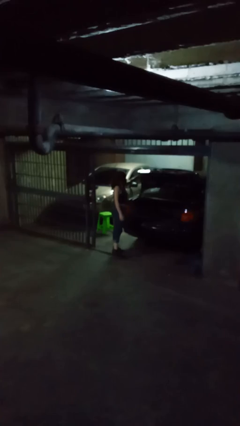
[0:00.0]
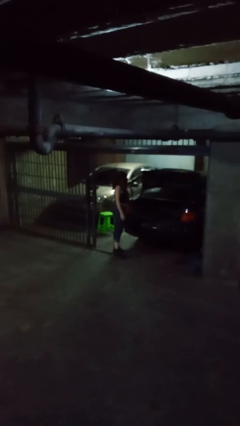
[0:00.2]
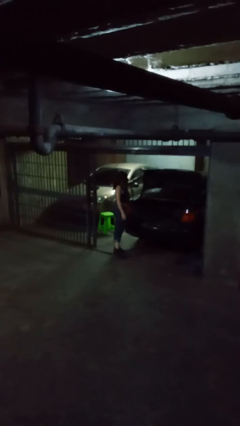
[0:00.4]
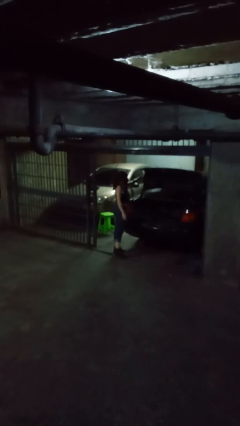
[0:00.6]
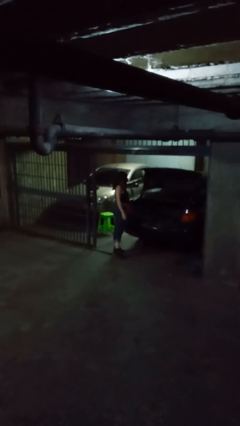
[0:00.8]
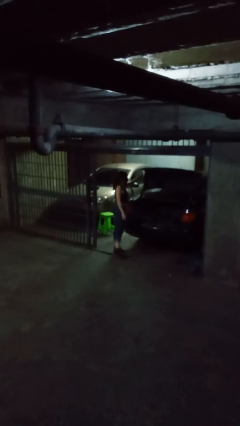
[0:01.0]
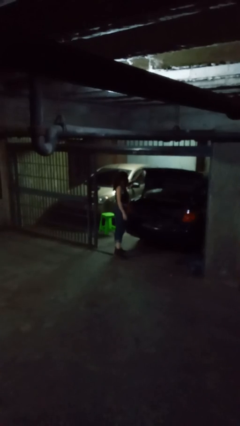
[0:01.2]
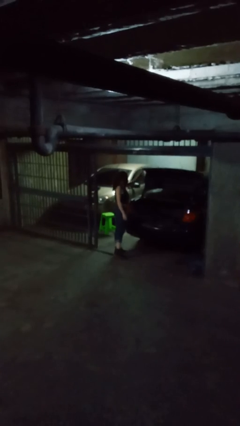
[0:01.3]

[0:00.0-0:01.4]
person opens car trunk

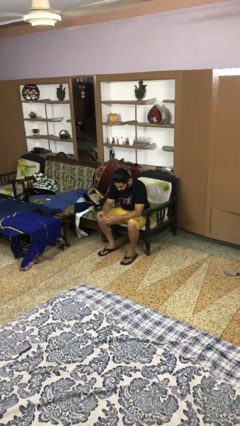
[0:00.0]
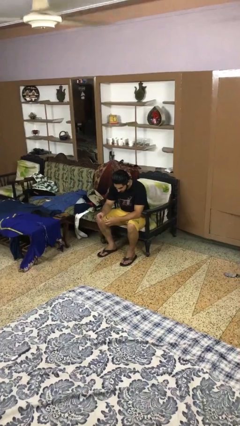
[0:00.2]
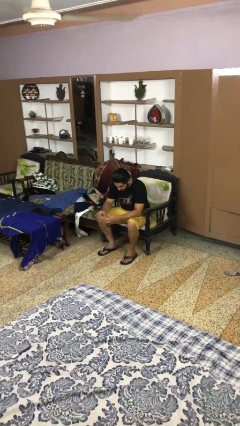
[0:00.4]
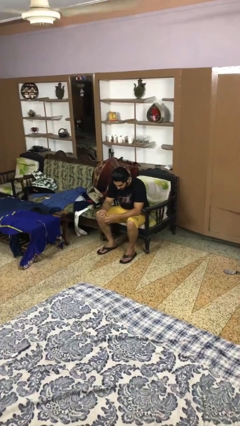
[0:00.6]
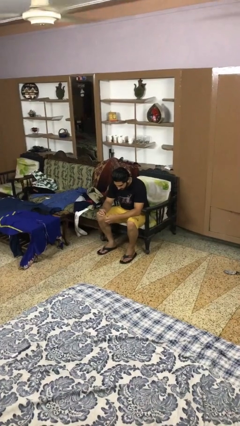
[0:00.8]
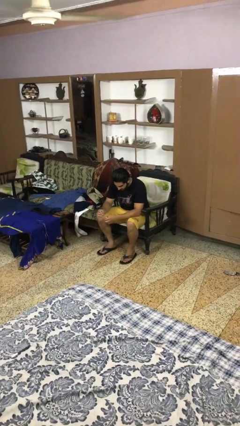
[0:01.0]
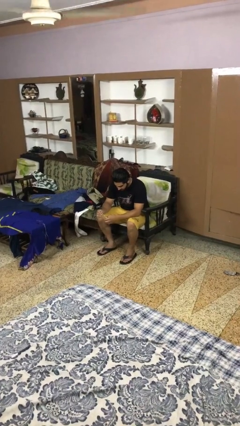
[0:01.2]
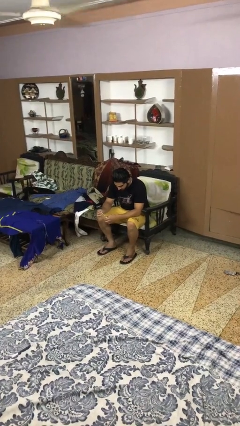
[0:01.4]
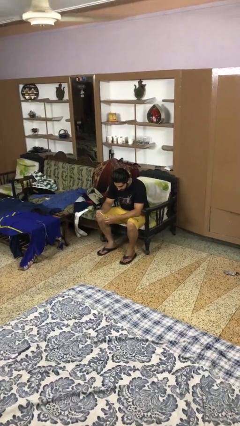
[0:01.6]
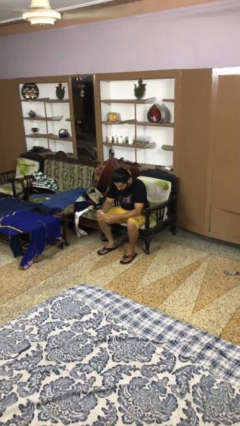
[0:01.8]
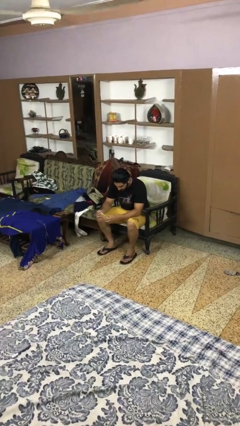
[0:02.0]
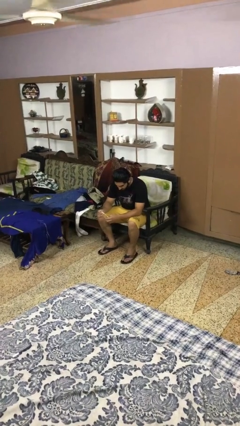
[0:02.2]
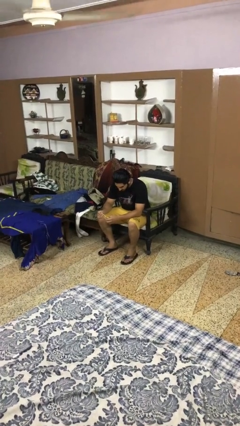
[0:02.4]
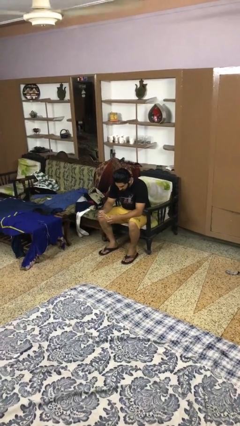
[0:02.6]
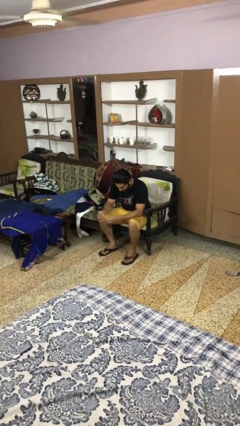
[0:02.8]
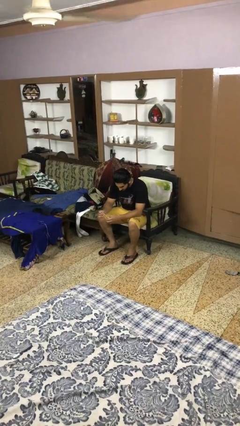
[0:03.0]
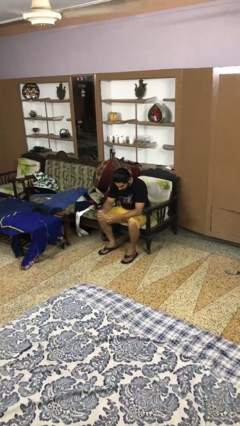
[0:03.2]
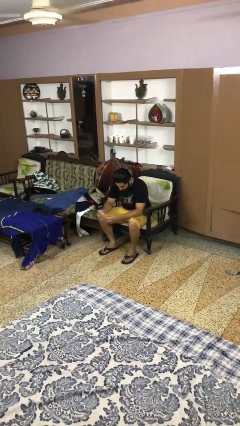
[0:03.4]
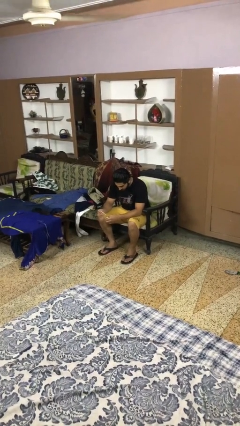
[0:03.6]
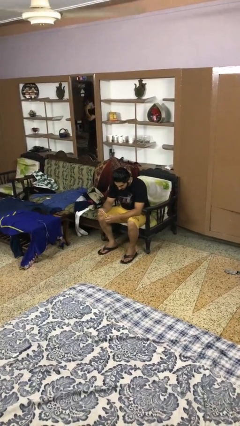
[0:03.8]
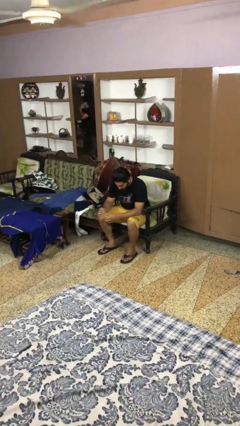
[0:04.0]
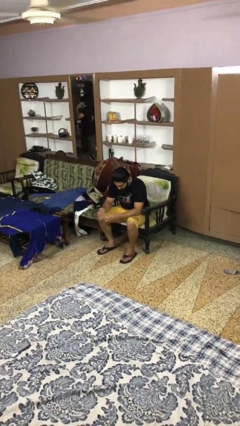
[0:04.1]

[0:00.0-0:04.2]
person paints fingernails

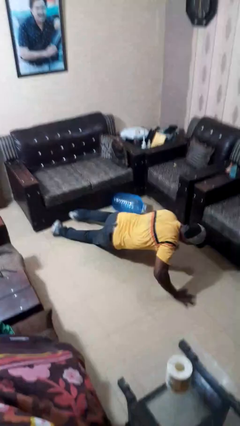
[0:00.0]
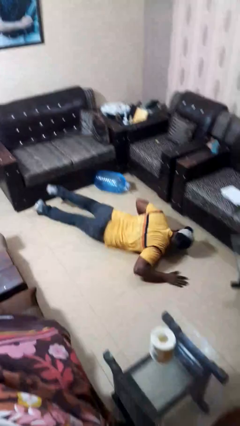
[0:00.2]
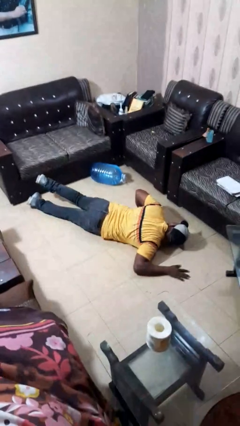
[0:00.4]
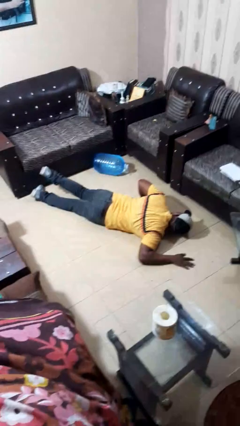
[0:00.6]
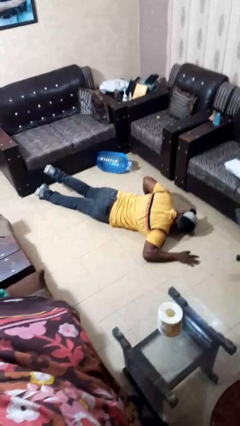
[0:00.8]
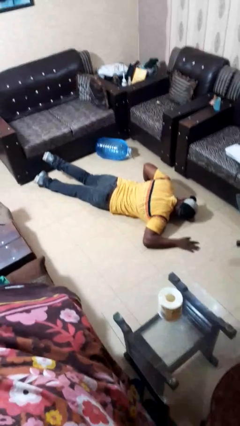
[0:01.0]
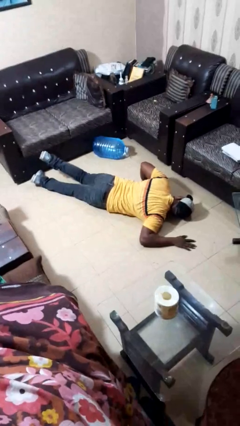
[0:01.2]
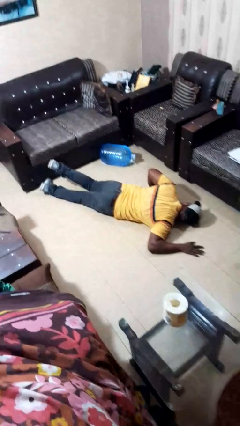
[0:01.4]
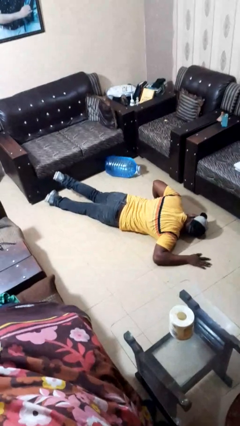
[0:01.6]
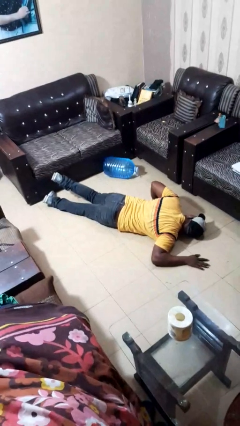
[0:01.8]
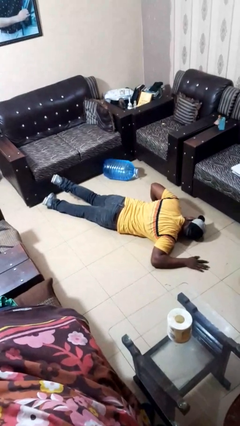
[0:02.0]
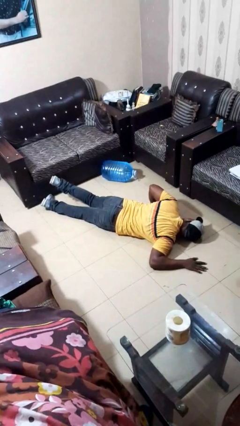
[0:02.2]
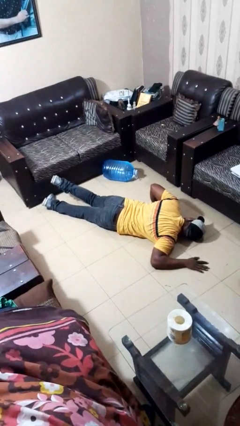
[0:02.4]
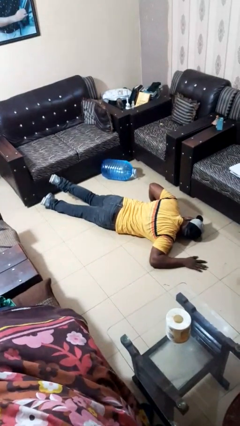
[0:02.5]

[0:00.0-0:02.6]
person lies down on floor

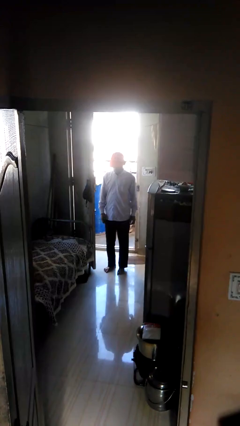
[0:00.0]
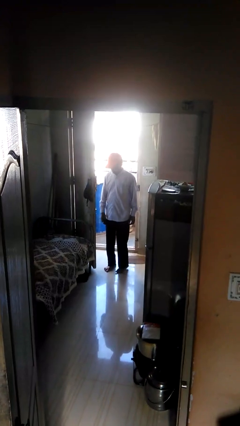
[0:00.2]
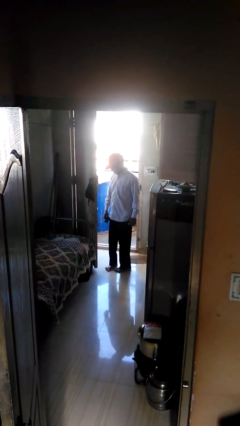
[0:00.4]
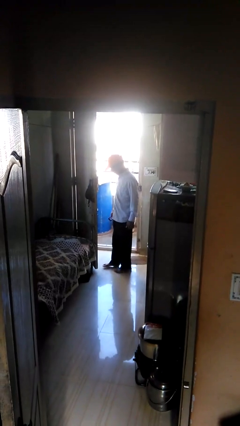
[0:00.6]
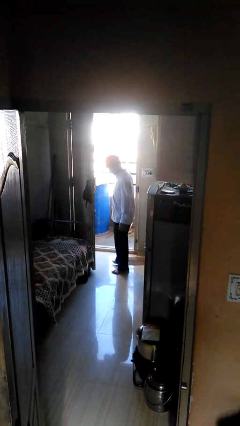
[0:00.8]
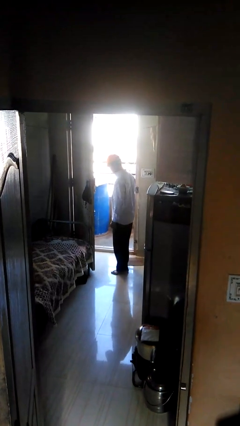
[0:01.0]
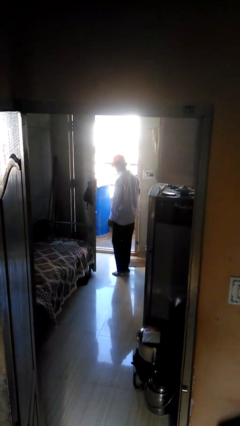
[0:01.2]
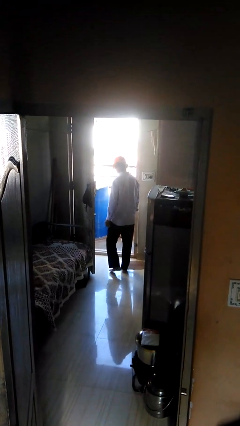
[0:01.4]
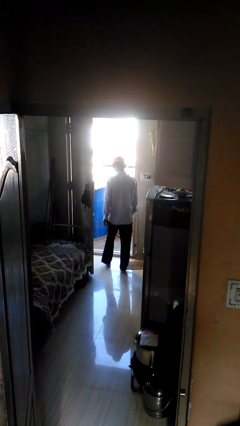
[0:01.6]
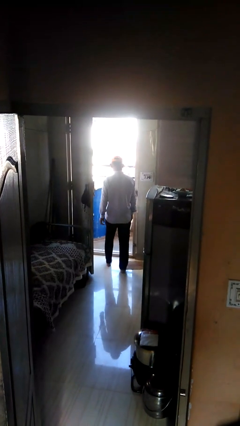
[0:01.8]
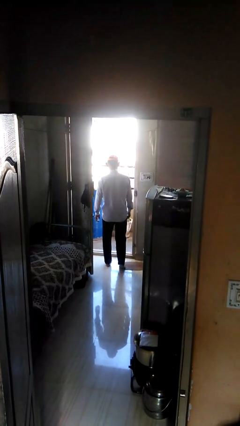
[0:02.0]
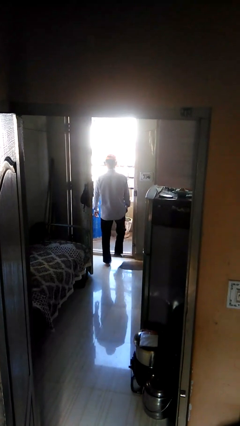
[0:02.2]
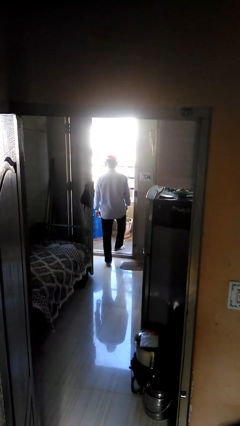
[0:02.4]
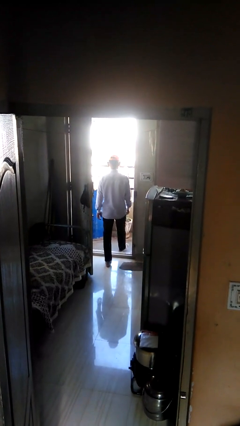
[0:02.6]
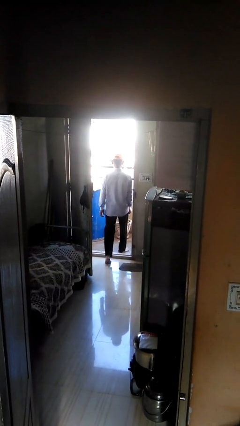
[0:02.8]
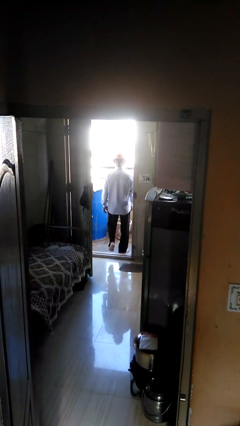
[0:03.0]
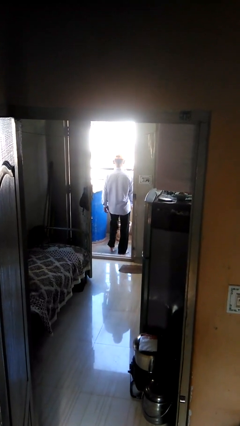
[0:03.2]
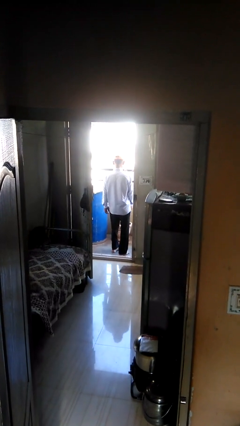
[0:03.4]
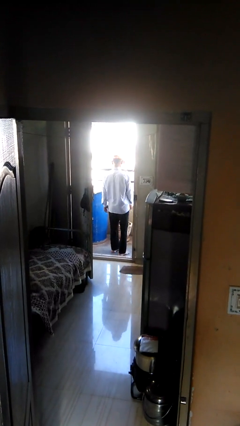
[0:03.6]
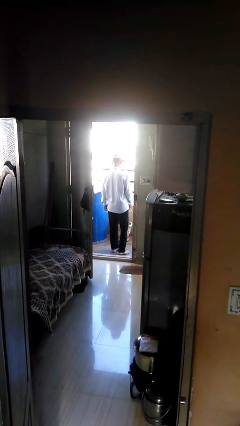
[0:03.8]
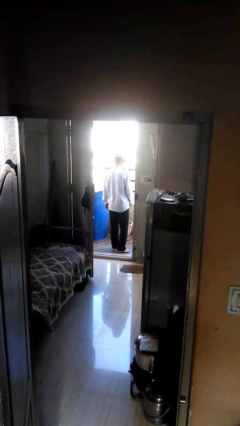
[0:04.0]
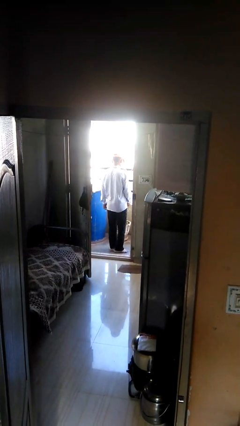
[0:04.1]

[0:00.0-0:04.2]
person exits scene through structure

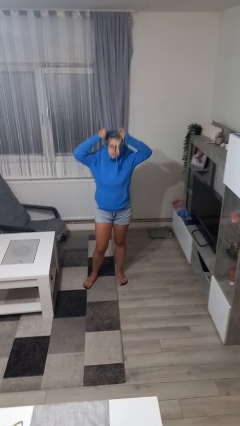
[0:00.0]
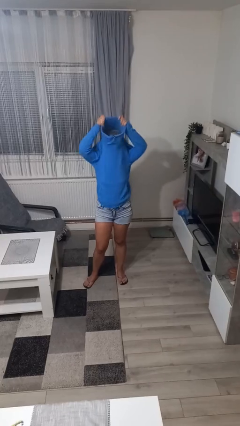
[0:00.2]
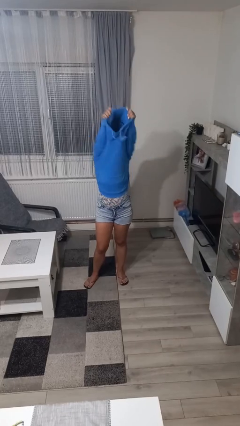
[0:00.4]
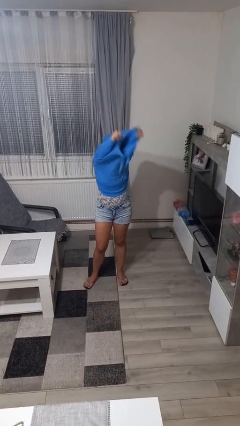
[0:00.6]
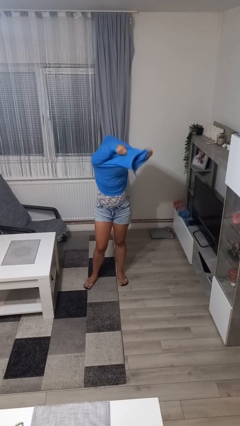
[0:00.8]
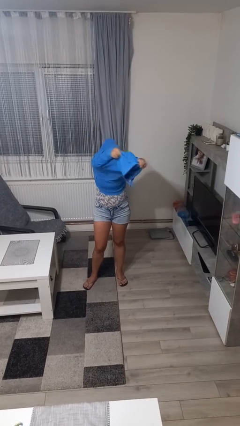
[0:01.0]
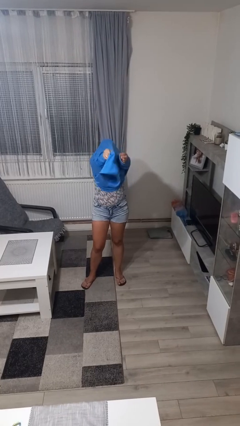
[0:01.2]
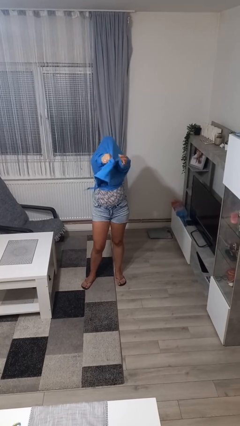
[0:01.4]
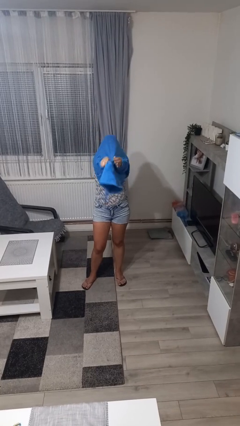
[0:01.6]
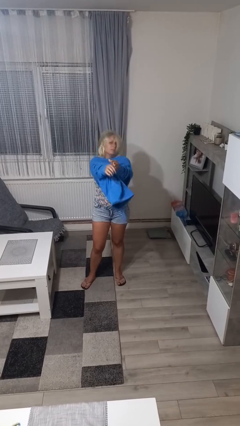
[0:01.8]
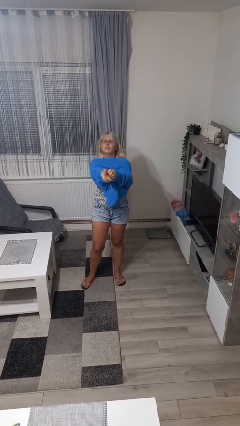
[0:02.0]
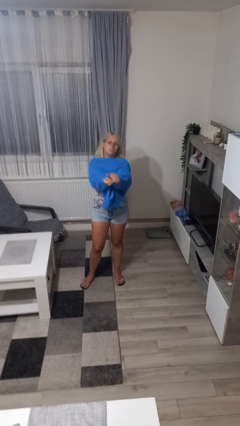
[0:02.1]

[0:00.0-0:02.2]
person takes off hoodie

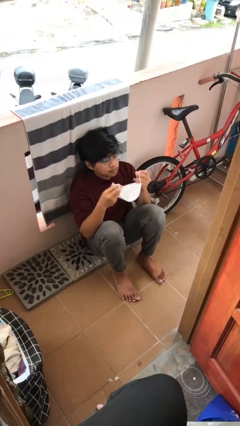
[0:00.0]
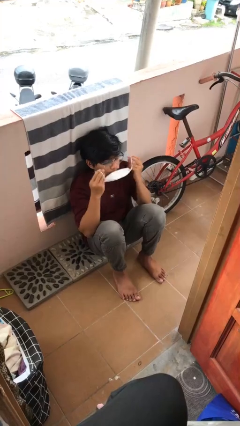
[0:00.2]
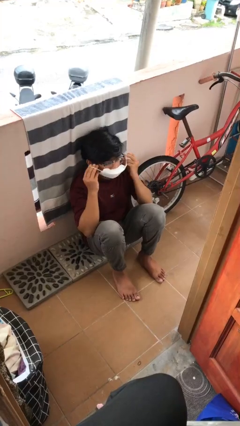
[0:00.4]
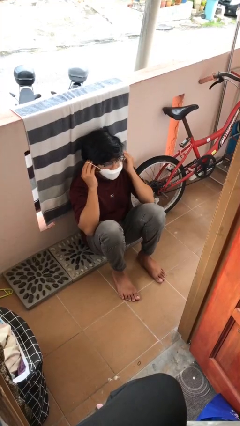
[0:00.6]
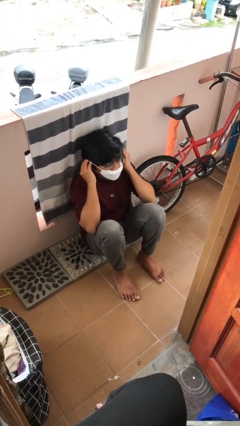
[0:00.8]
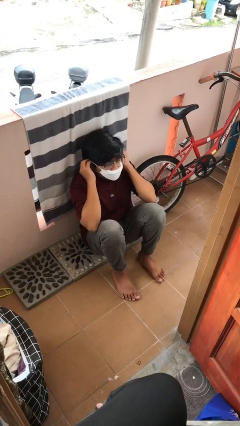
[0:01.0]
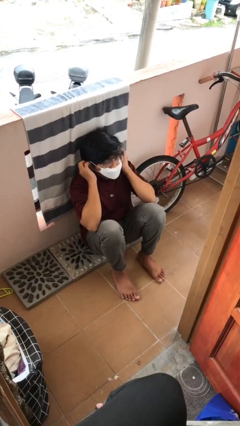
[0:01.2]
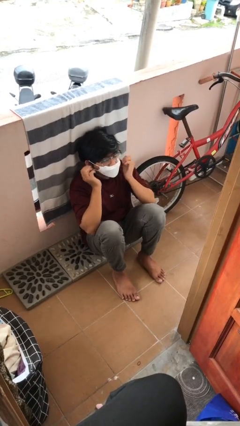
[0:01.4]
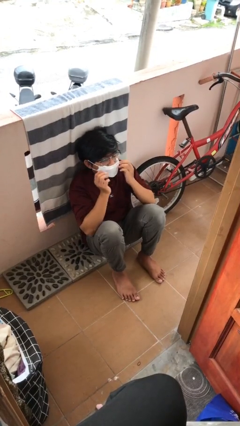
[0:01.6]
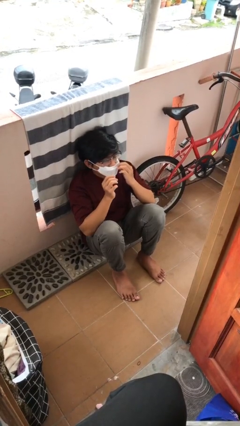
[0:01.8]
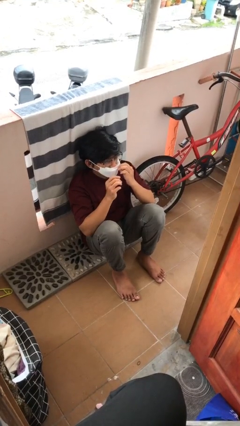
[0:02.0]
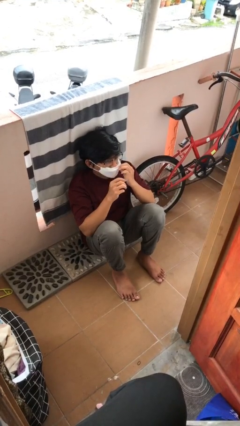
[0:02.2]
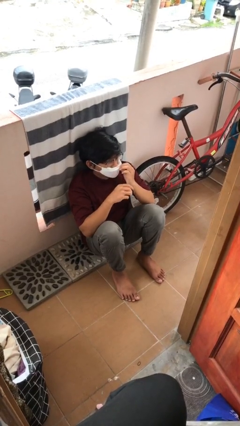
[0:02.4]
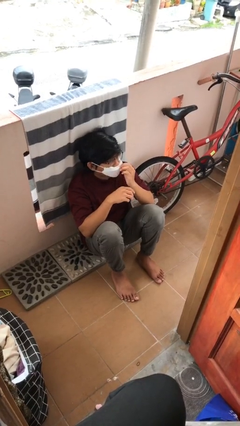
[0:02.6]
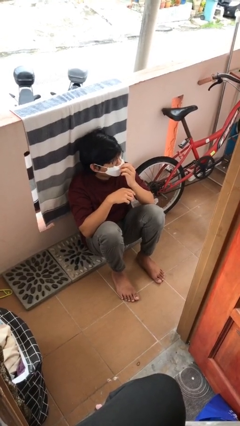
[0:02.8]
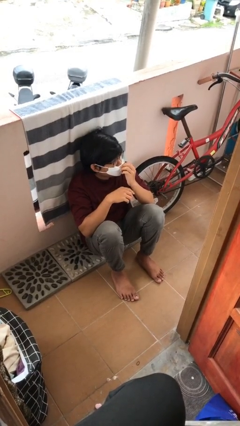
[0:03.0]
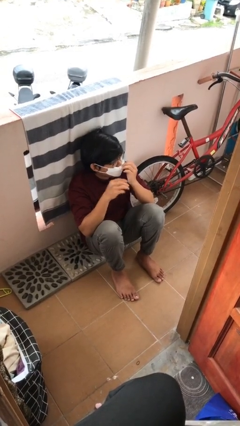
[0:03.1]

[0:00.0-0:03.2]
person puts on facemask
